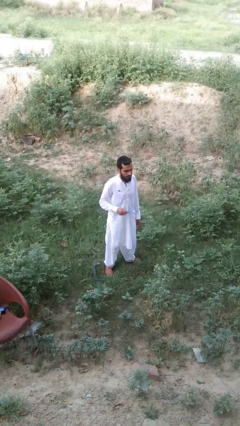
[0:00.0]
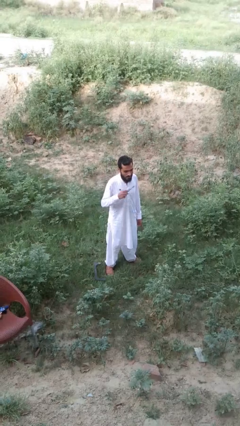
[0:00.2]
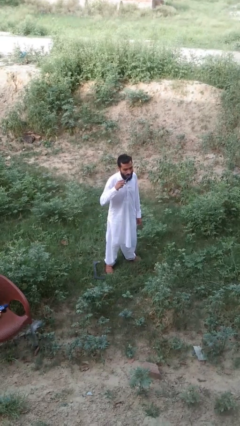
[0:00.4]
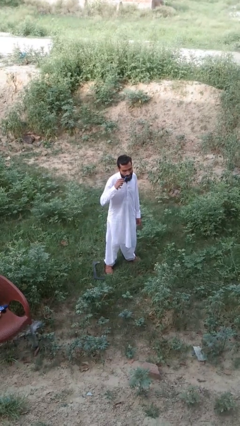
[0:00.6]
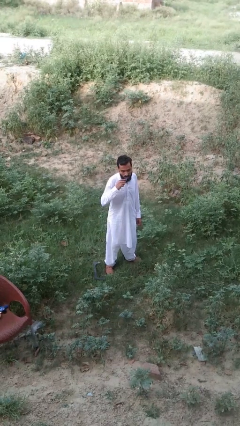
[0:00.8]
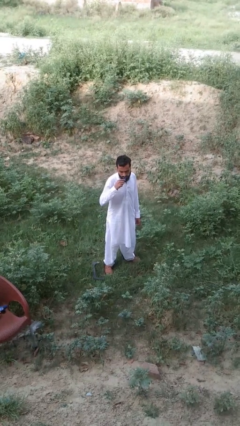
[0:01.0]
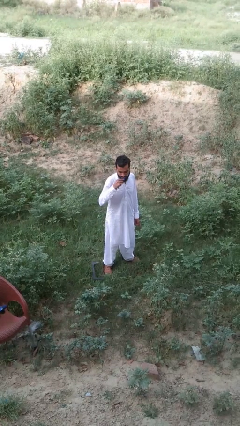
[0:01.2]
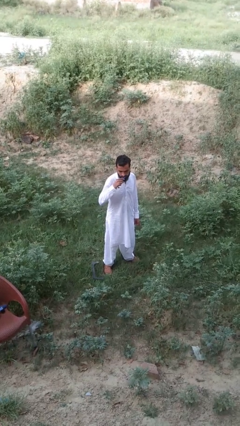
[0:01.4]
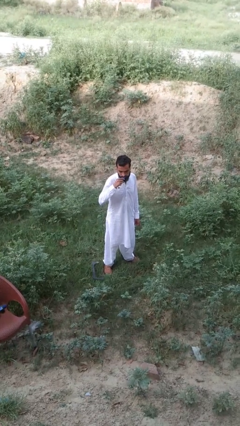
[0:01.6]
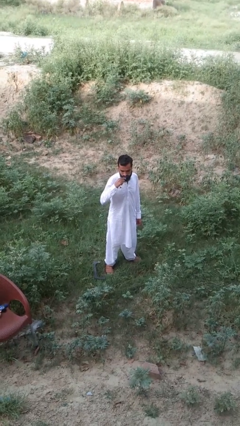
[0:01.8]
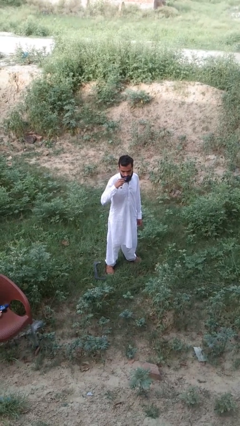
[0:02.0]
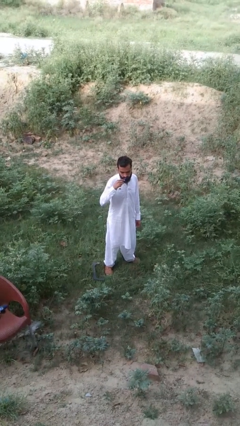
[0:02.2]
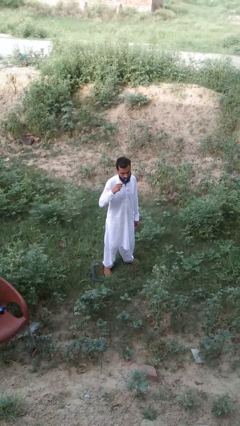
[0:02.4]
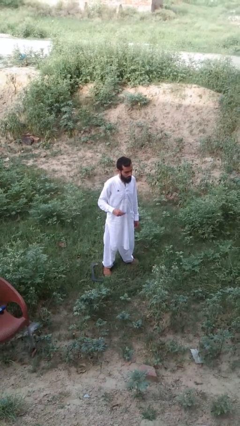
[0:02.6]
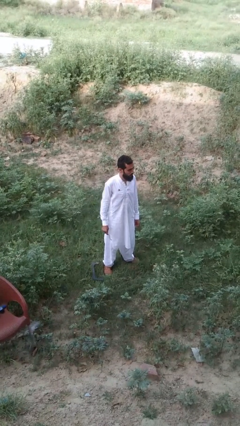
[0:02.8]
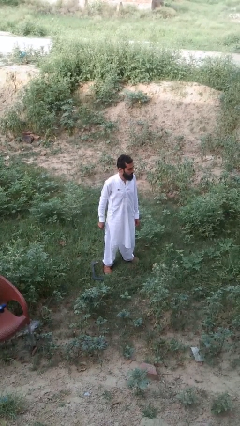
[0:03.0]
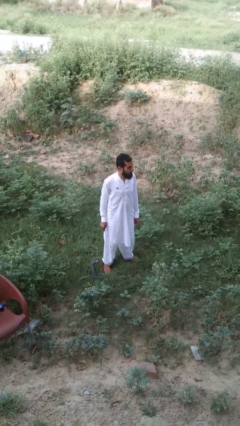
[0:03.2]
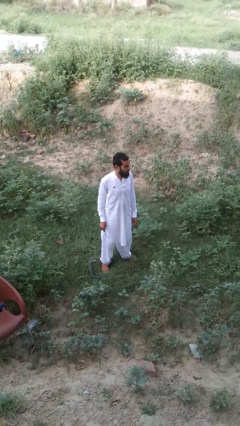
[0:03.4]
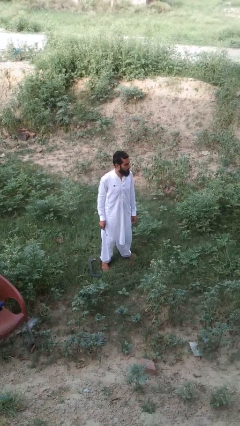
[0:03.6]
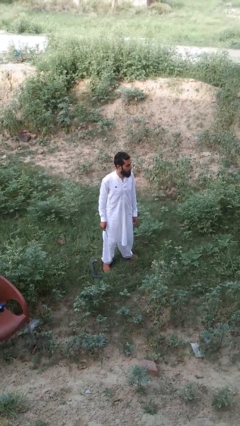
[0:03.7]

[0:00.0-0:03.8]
person brushes teeth

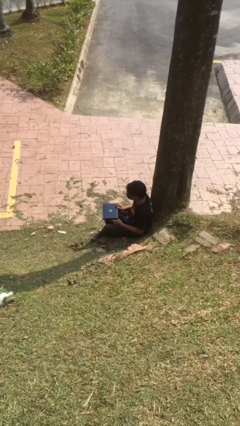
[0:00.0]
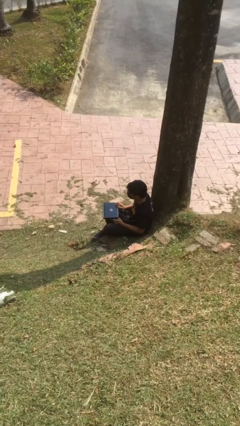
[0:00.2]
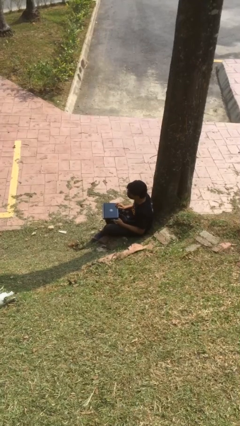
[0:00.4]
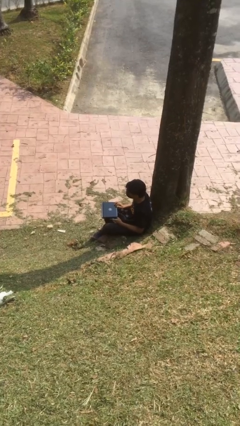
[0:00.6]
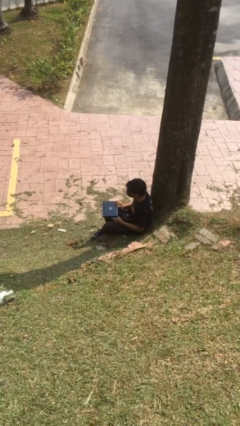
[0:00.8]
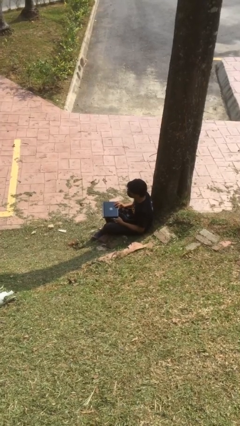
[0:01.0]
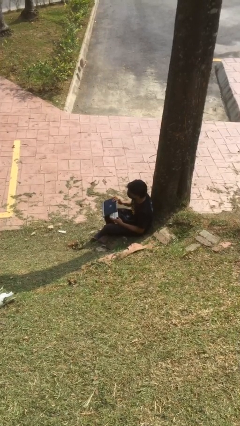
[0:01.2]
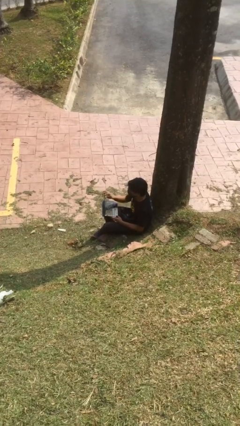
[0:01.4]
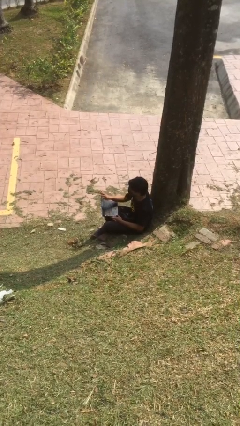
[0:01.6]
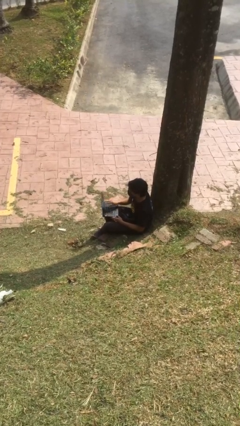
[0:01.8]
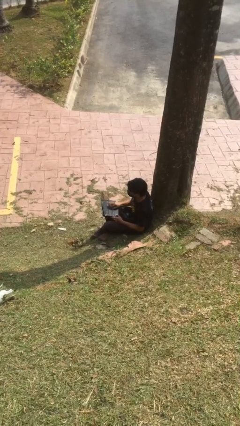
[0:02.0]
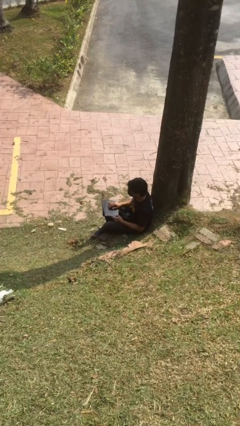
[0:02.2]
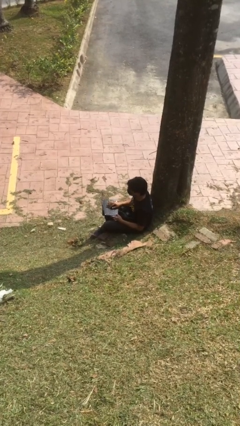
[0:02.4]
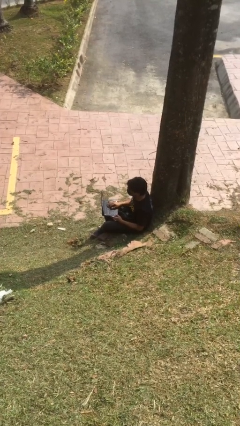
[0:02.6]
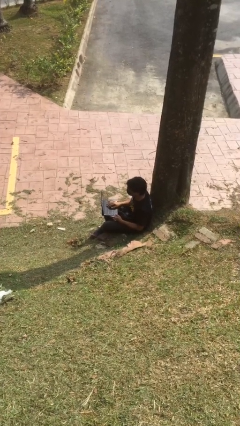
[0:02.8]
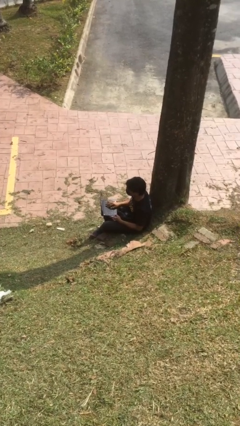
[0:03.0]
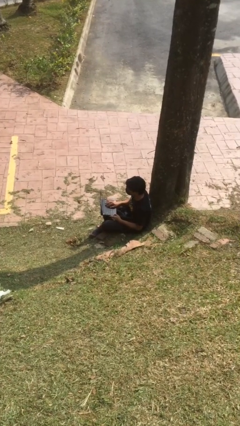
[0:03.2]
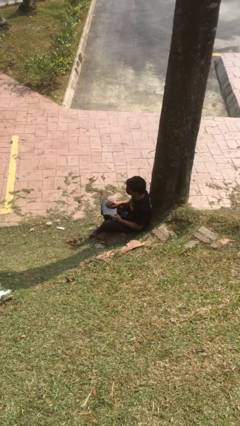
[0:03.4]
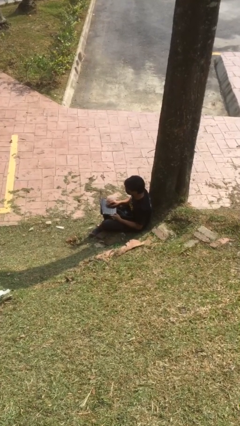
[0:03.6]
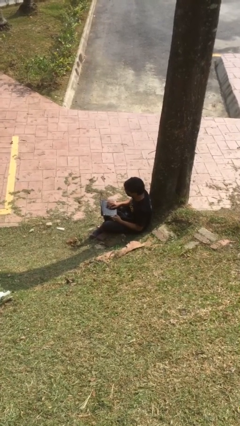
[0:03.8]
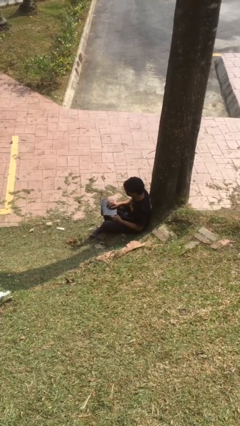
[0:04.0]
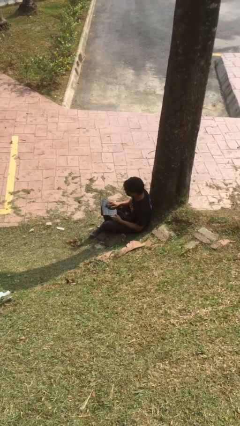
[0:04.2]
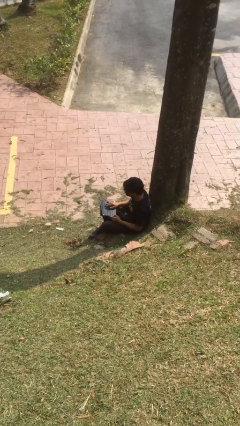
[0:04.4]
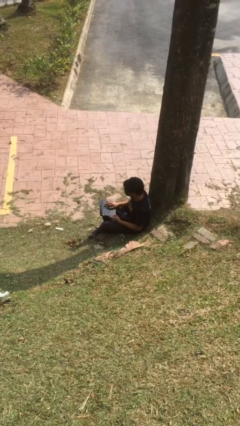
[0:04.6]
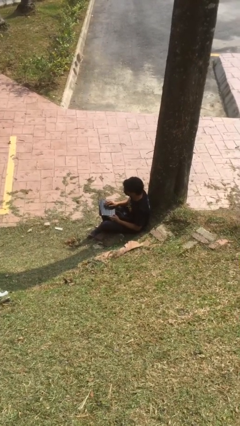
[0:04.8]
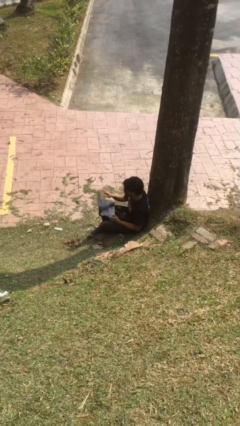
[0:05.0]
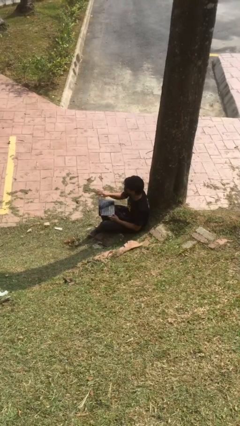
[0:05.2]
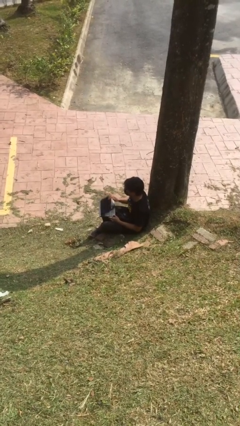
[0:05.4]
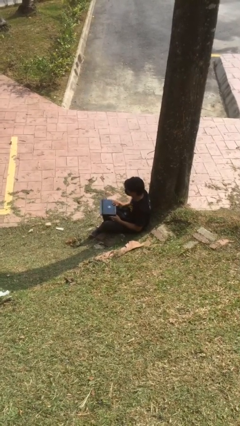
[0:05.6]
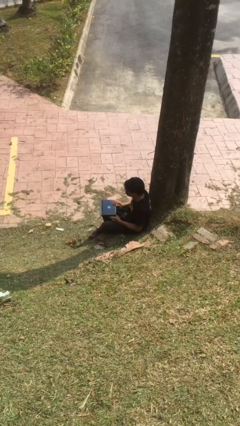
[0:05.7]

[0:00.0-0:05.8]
person interacts with laptop

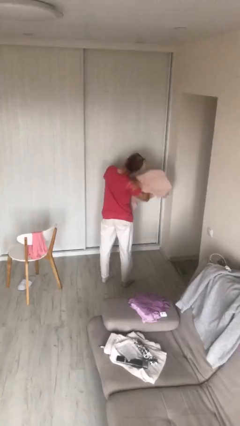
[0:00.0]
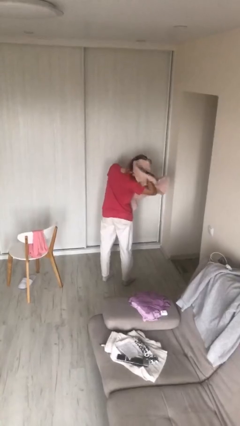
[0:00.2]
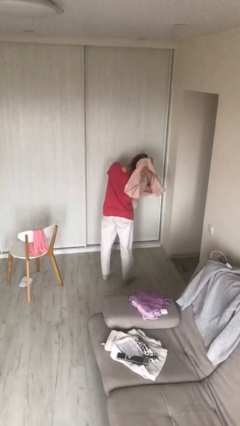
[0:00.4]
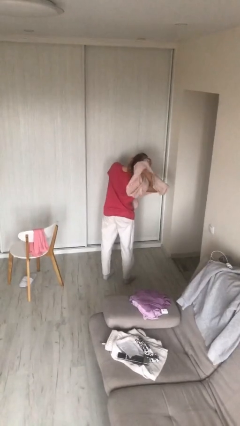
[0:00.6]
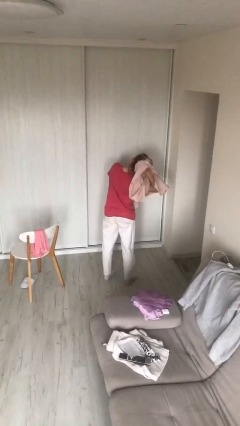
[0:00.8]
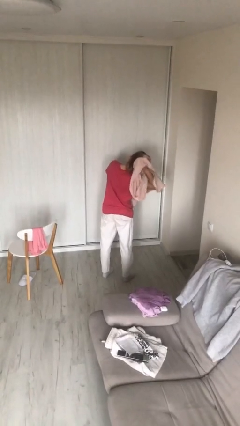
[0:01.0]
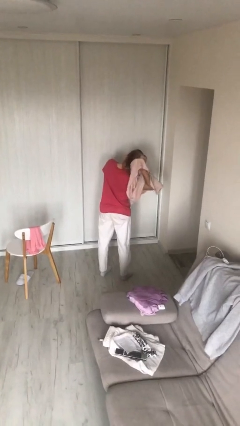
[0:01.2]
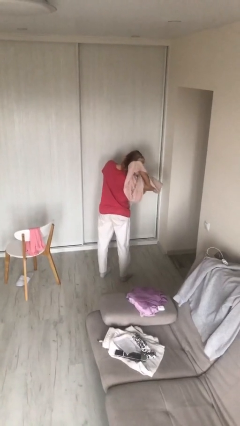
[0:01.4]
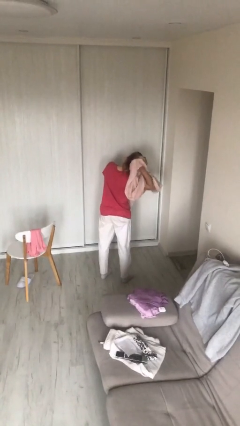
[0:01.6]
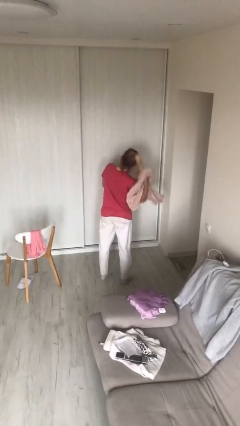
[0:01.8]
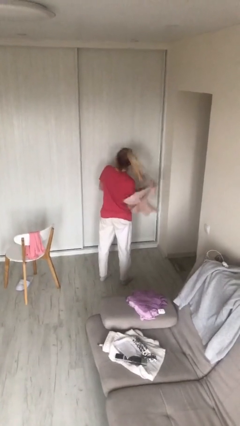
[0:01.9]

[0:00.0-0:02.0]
person dries hair with towel

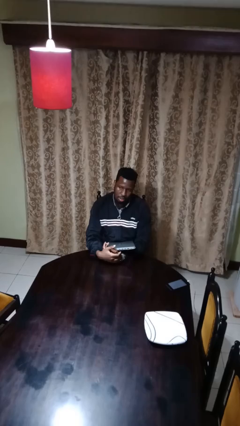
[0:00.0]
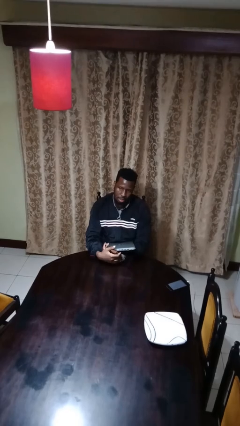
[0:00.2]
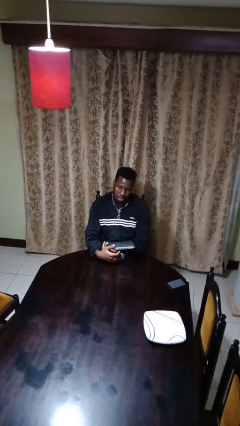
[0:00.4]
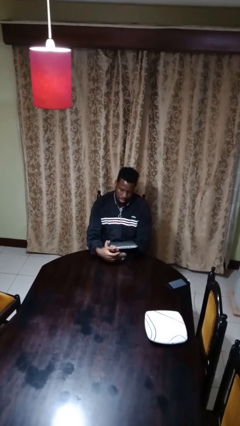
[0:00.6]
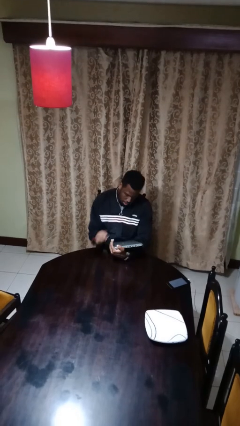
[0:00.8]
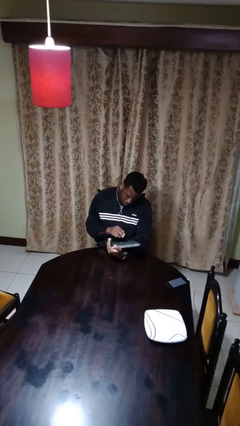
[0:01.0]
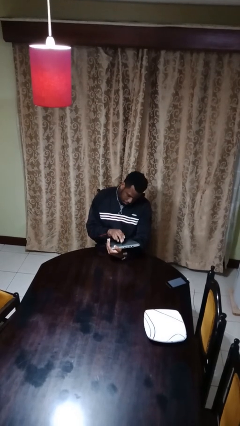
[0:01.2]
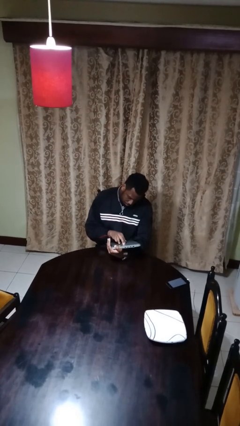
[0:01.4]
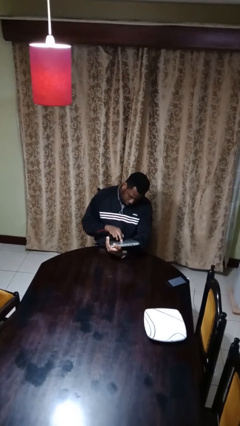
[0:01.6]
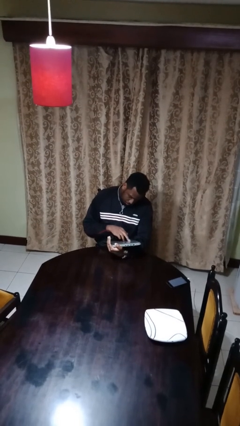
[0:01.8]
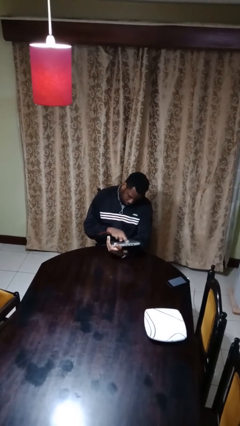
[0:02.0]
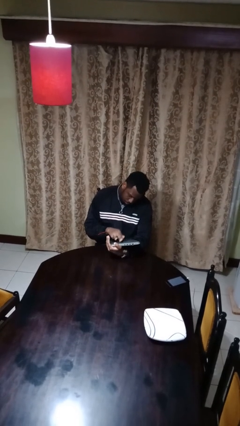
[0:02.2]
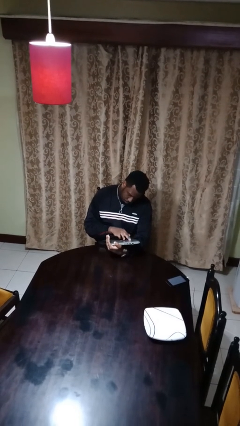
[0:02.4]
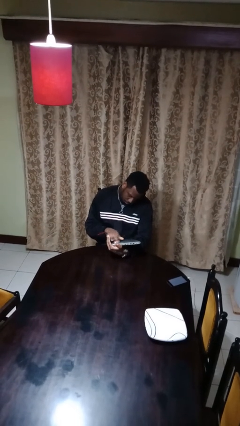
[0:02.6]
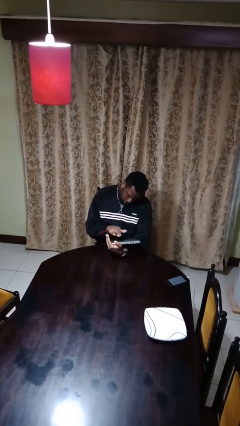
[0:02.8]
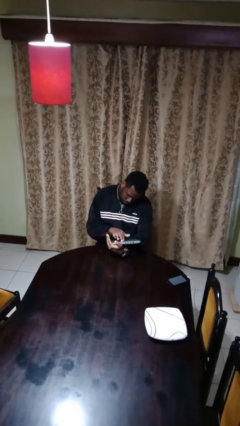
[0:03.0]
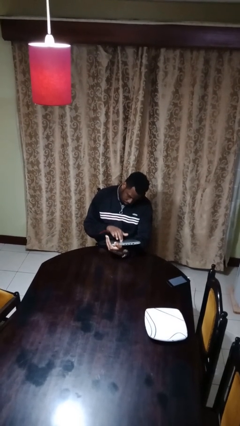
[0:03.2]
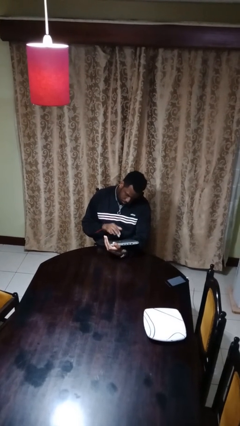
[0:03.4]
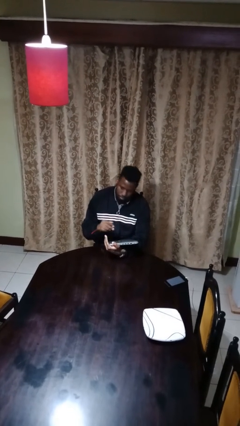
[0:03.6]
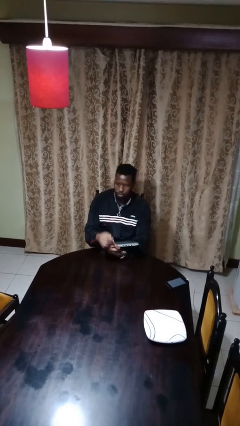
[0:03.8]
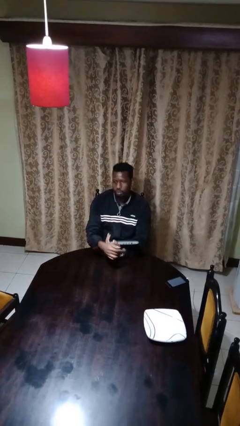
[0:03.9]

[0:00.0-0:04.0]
person interacts with tablet

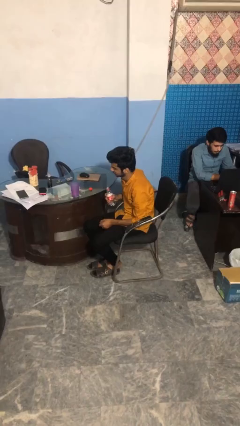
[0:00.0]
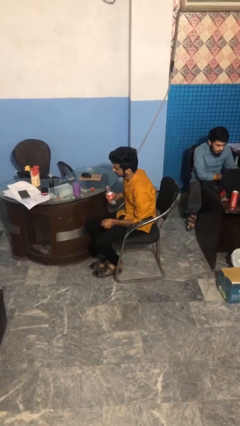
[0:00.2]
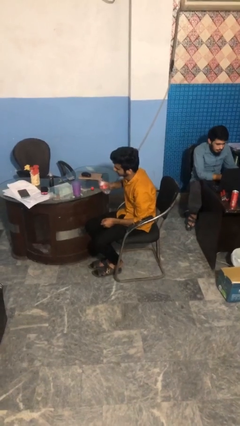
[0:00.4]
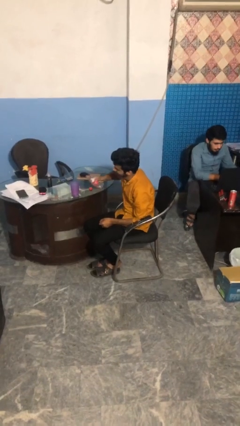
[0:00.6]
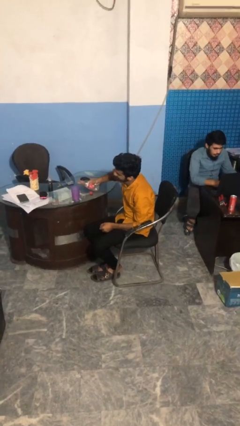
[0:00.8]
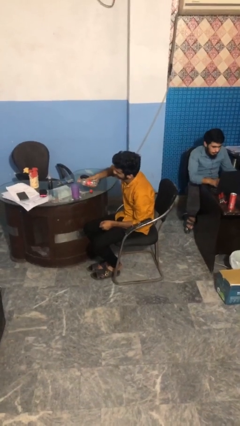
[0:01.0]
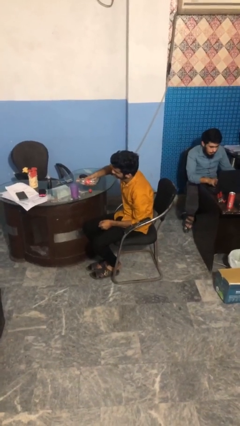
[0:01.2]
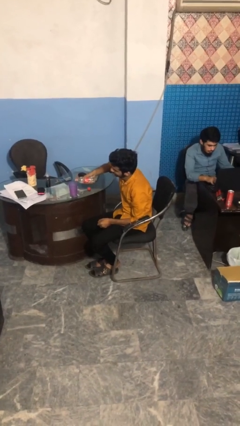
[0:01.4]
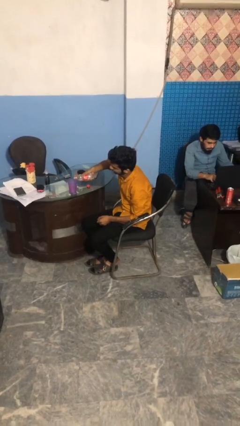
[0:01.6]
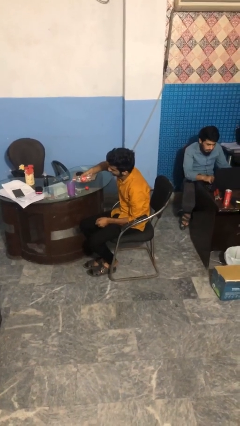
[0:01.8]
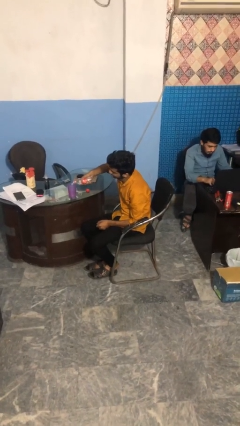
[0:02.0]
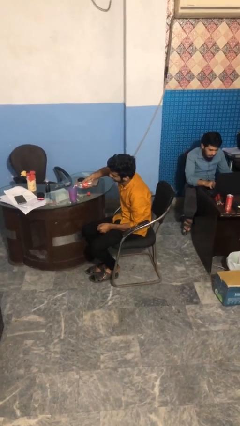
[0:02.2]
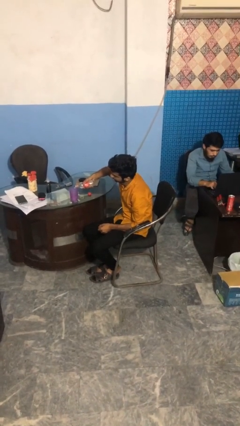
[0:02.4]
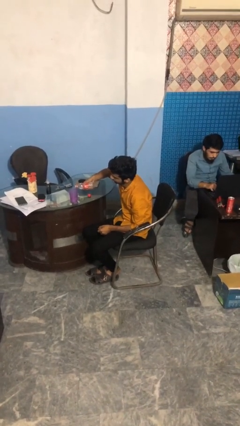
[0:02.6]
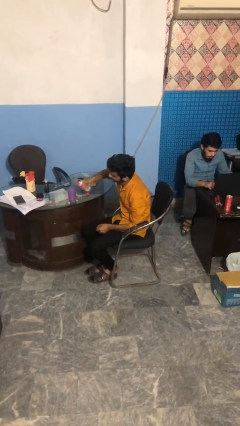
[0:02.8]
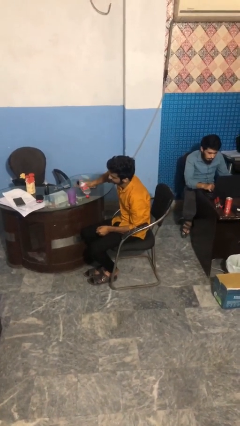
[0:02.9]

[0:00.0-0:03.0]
person pours liquid into cup
